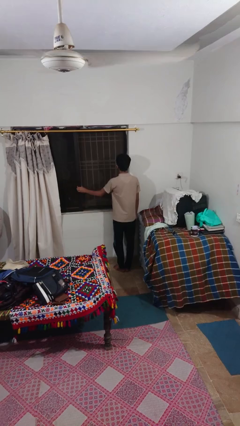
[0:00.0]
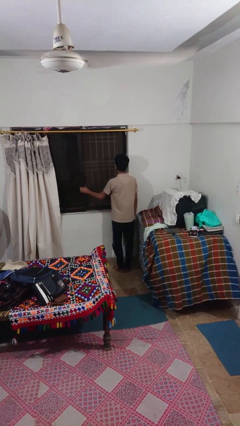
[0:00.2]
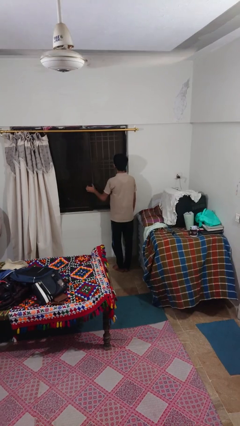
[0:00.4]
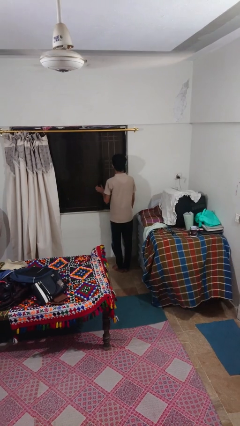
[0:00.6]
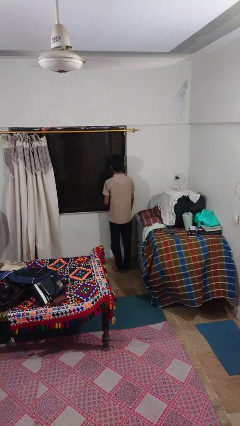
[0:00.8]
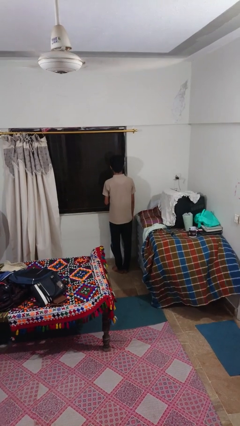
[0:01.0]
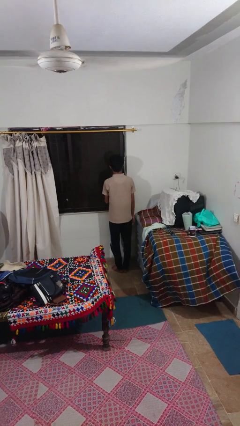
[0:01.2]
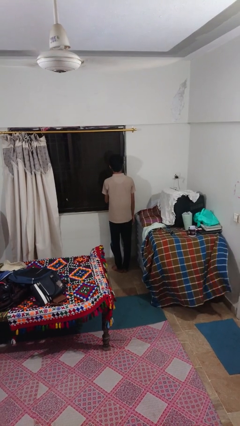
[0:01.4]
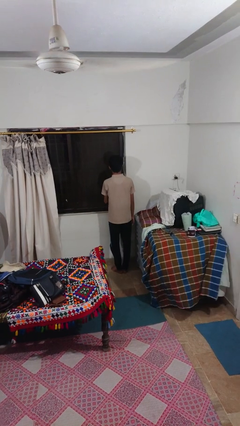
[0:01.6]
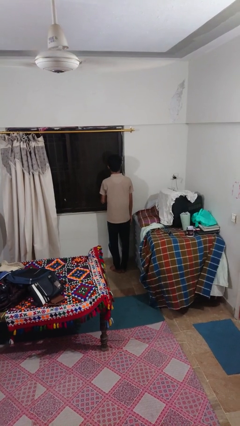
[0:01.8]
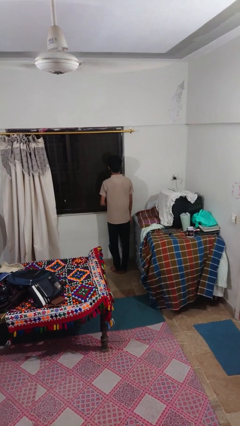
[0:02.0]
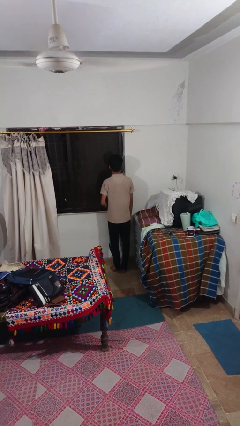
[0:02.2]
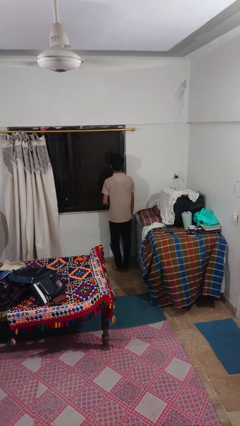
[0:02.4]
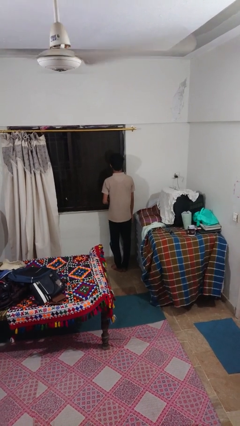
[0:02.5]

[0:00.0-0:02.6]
person closes sliding door

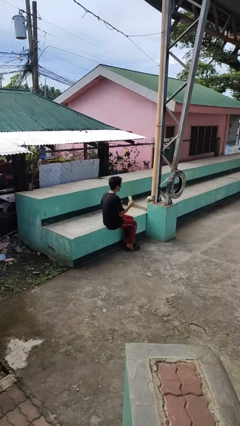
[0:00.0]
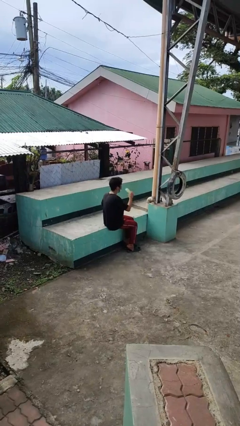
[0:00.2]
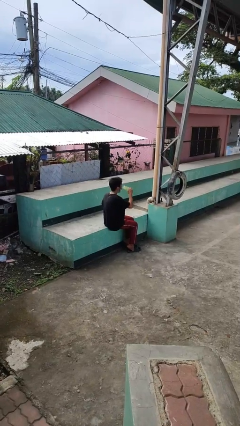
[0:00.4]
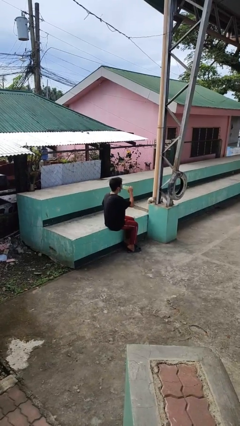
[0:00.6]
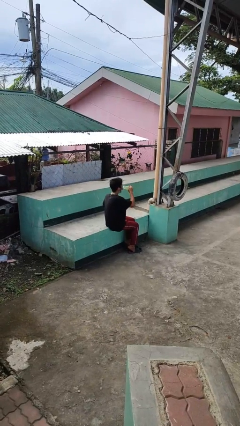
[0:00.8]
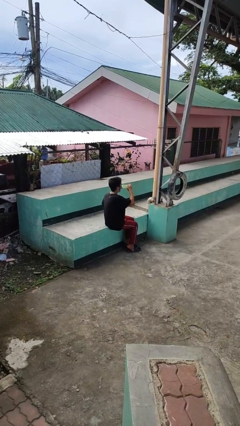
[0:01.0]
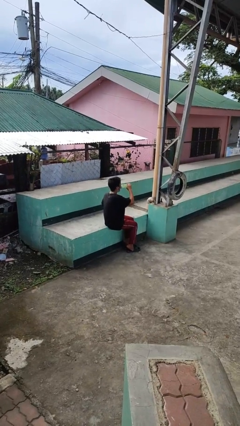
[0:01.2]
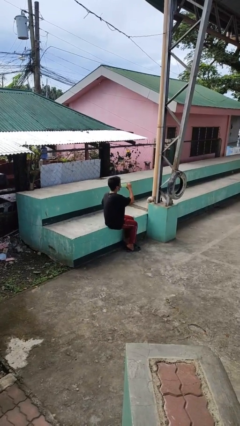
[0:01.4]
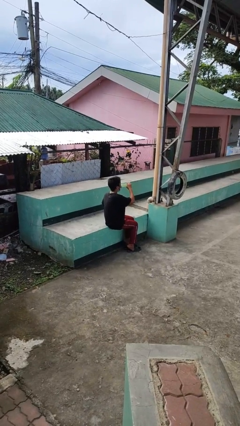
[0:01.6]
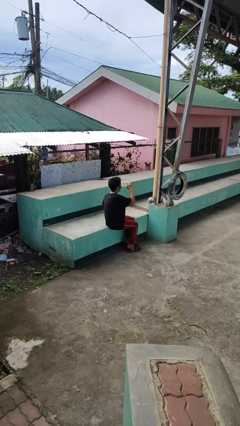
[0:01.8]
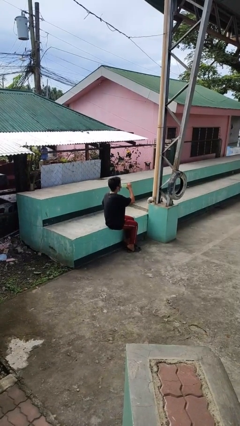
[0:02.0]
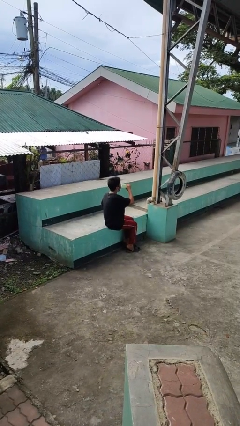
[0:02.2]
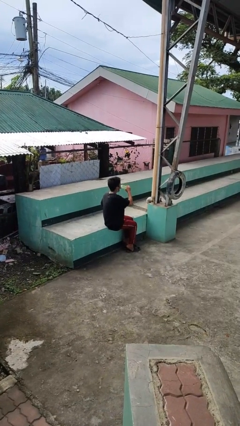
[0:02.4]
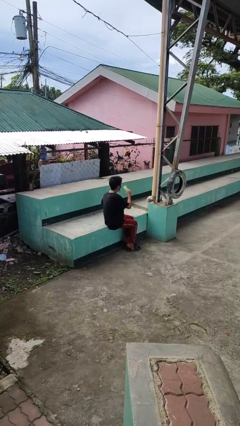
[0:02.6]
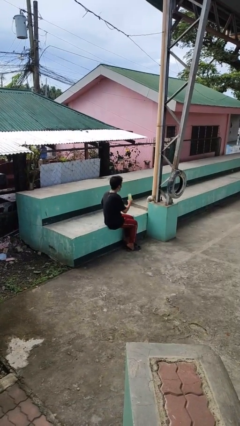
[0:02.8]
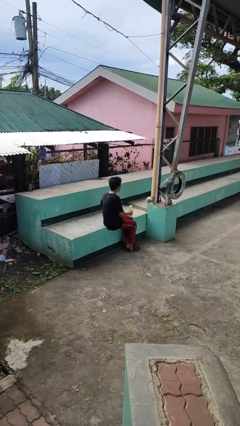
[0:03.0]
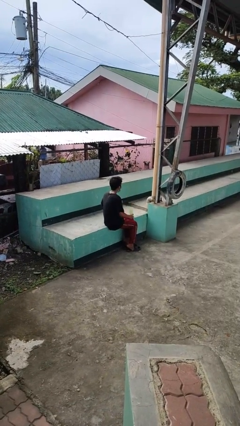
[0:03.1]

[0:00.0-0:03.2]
person drinks from bottle

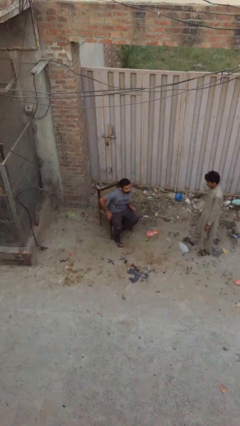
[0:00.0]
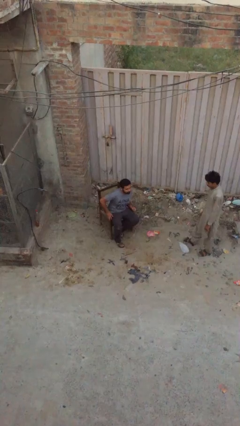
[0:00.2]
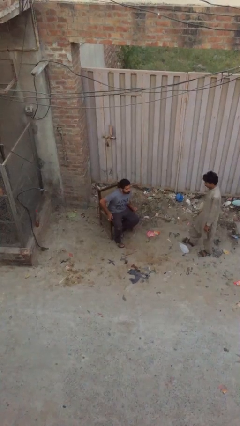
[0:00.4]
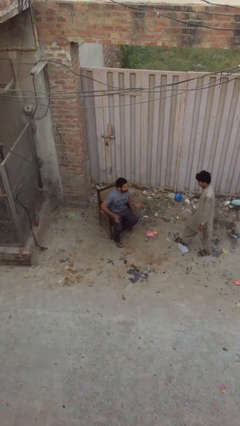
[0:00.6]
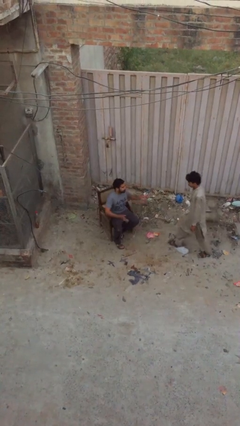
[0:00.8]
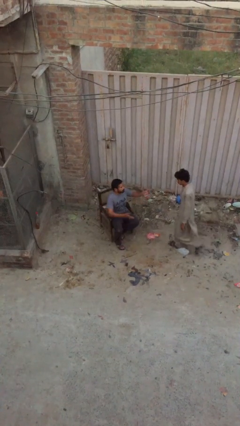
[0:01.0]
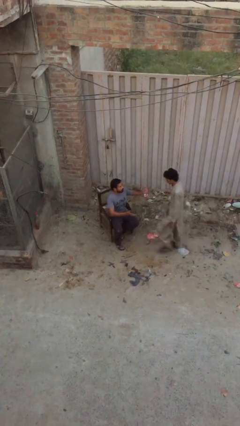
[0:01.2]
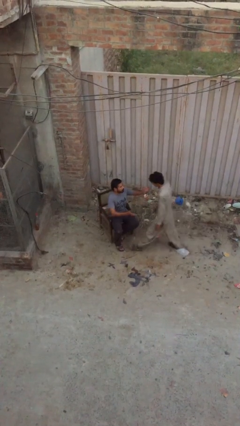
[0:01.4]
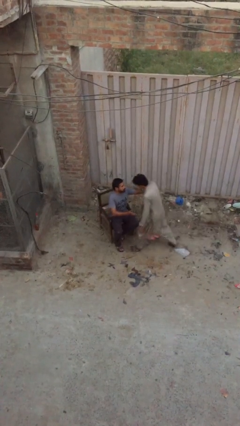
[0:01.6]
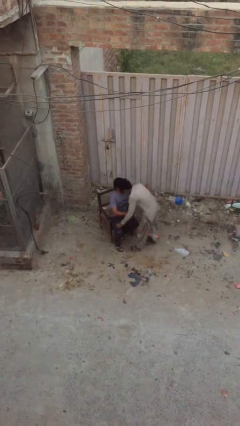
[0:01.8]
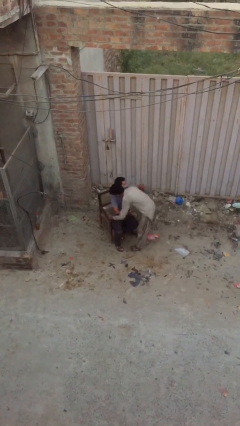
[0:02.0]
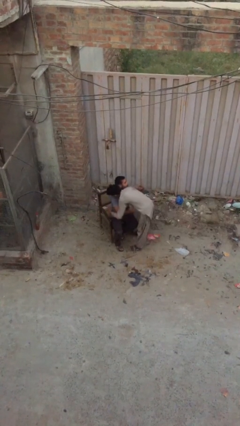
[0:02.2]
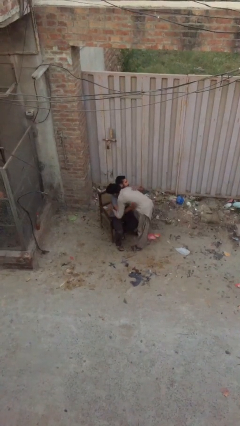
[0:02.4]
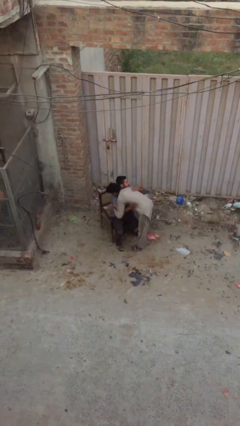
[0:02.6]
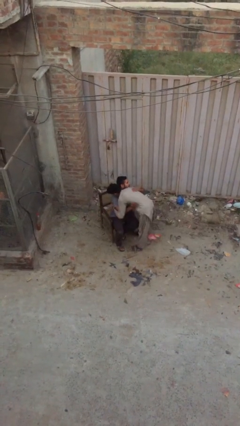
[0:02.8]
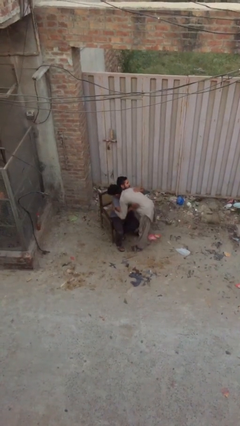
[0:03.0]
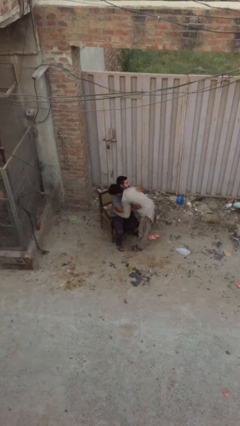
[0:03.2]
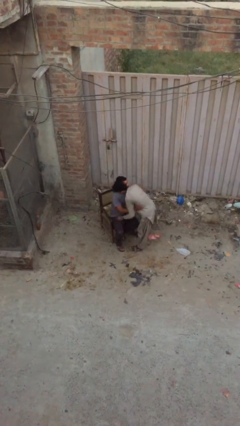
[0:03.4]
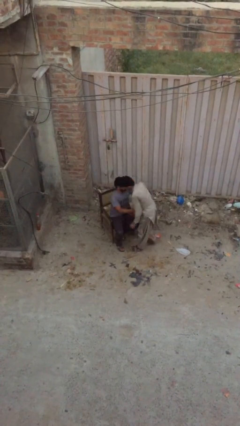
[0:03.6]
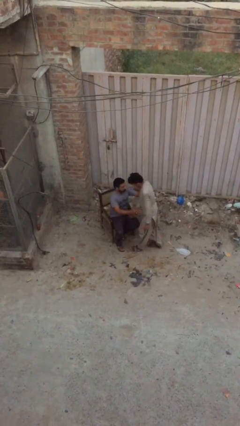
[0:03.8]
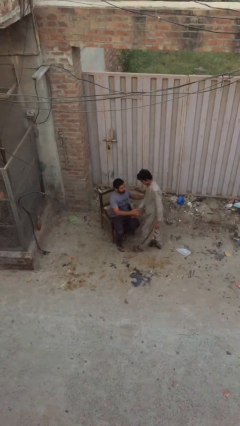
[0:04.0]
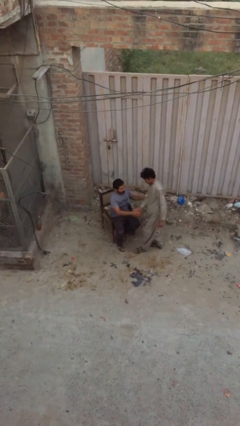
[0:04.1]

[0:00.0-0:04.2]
person embraces person

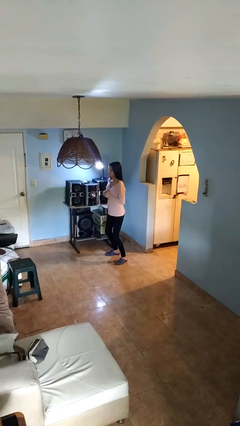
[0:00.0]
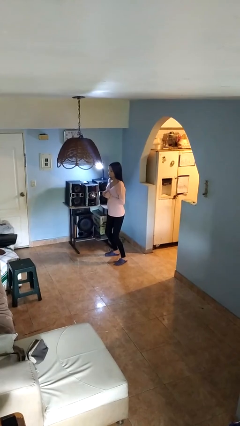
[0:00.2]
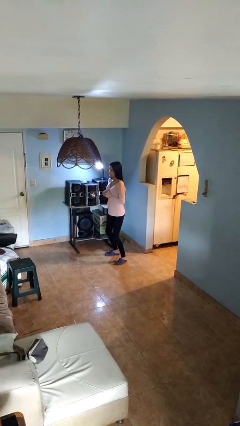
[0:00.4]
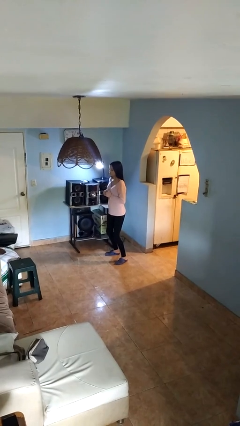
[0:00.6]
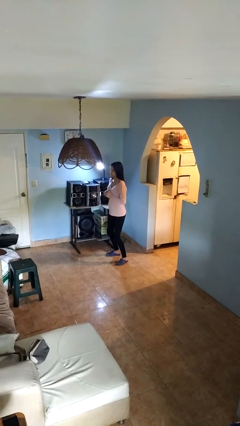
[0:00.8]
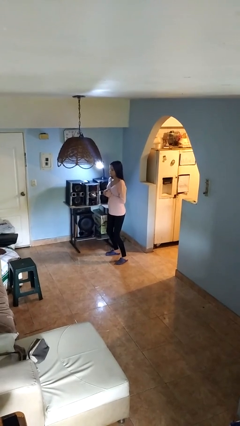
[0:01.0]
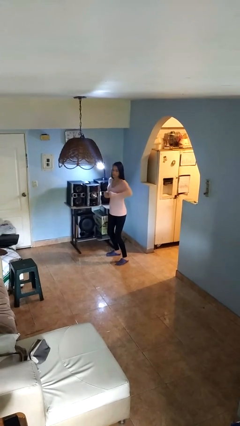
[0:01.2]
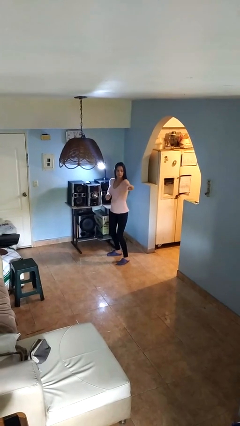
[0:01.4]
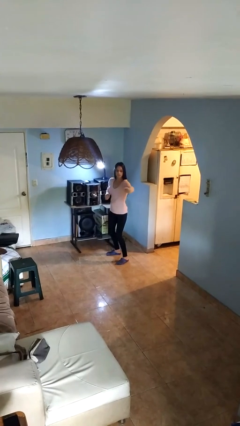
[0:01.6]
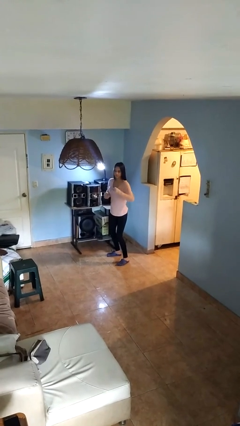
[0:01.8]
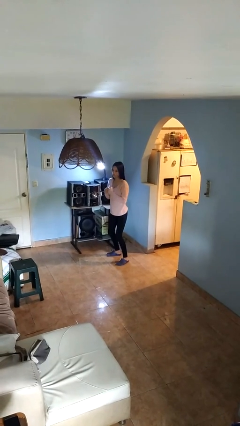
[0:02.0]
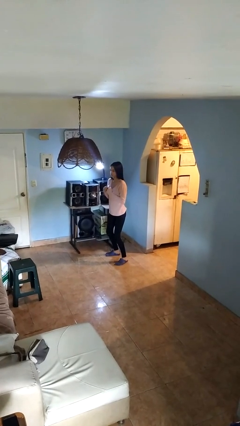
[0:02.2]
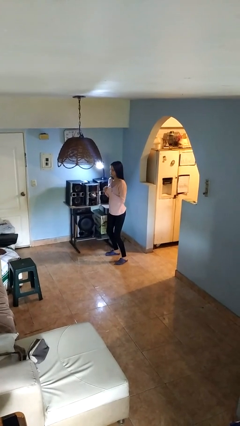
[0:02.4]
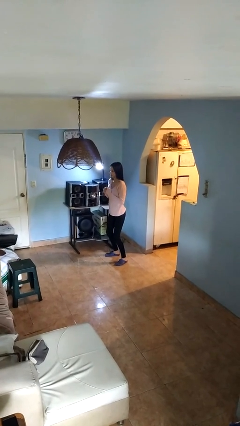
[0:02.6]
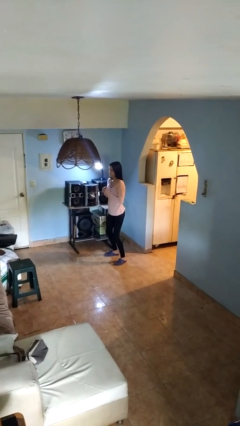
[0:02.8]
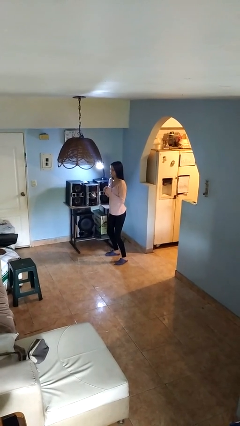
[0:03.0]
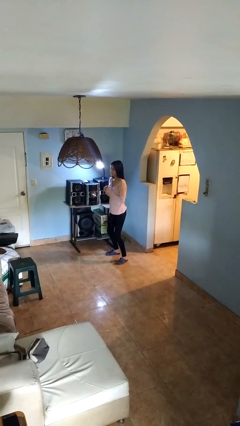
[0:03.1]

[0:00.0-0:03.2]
person karate chop

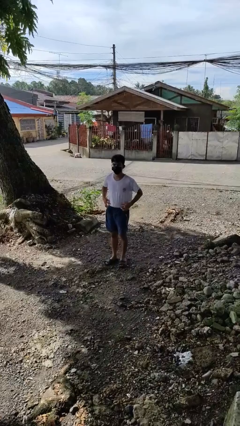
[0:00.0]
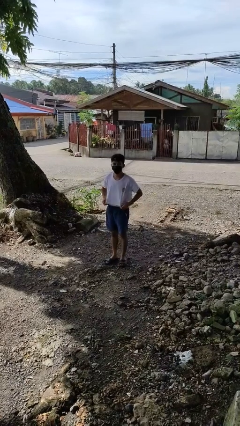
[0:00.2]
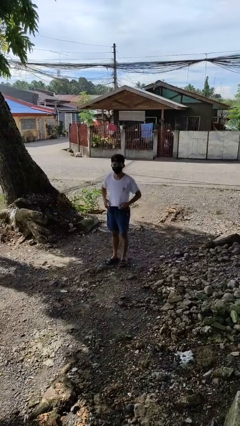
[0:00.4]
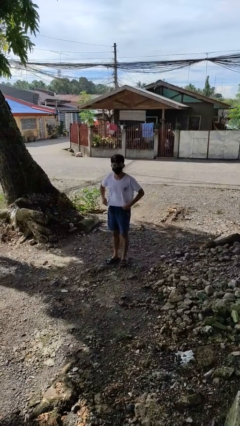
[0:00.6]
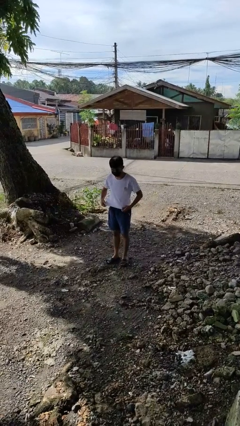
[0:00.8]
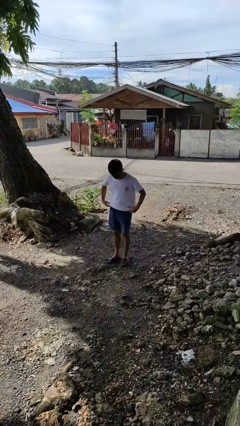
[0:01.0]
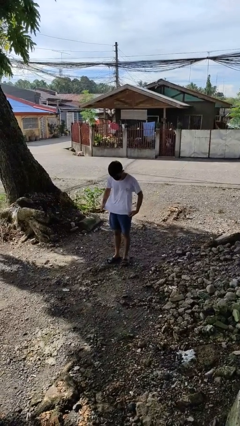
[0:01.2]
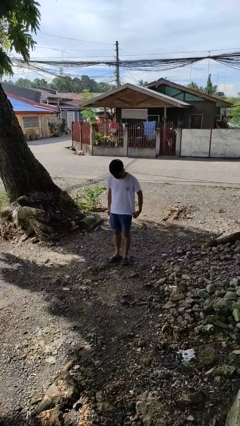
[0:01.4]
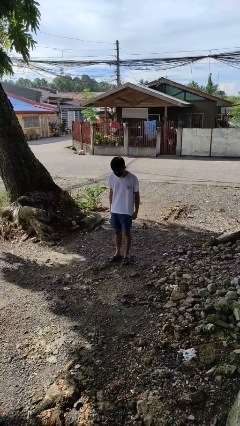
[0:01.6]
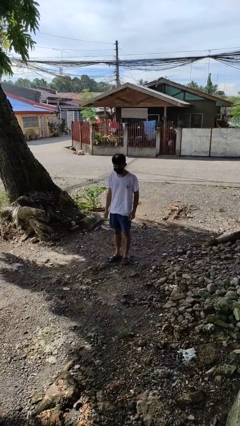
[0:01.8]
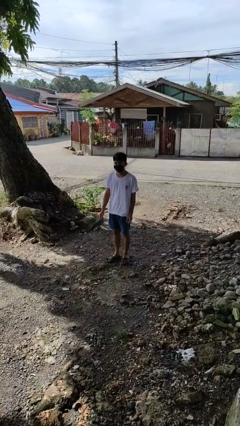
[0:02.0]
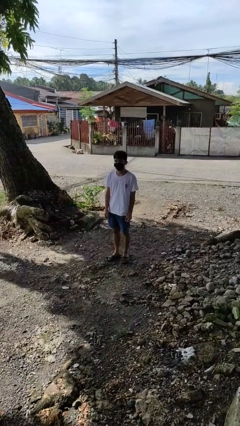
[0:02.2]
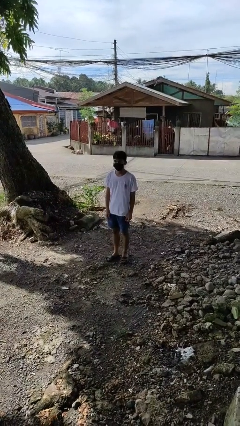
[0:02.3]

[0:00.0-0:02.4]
person untucks shirt

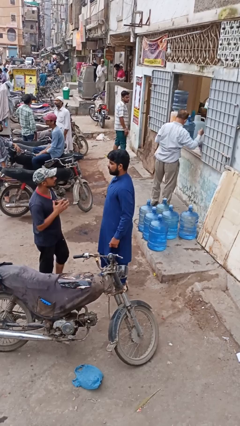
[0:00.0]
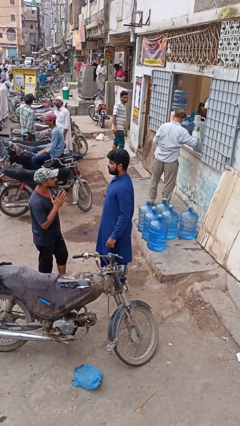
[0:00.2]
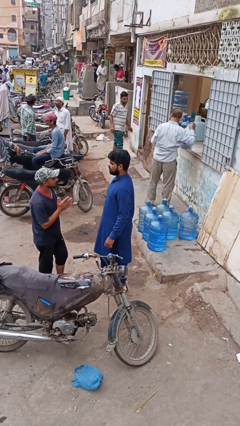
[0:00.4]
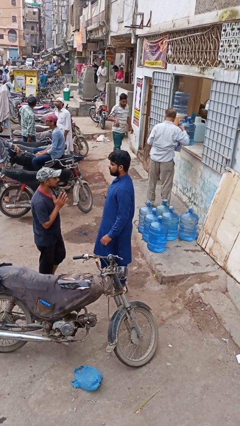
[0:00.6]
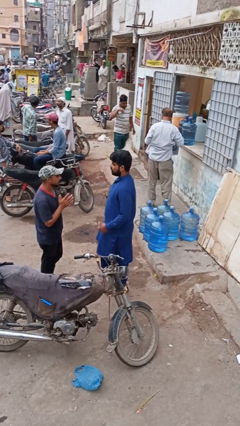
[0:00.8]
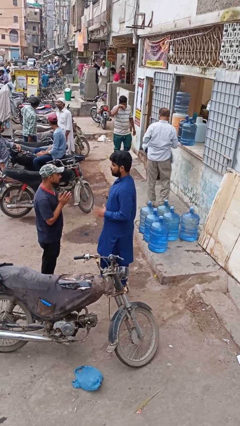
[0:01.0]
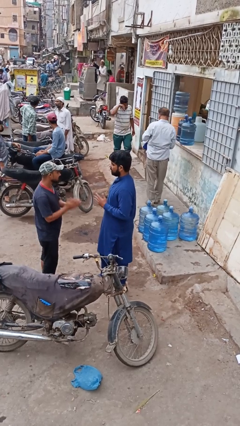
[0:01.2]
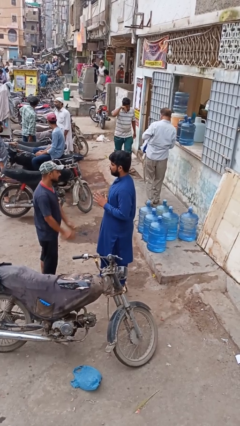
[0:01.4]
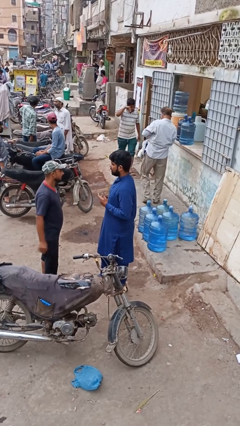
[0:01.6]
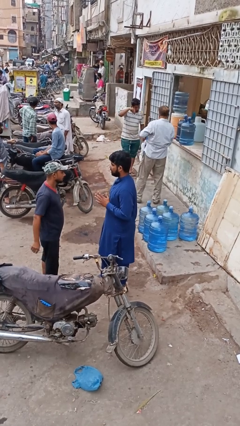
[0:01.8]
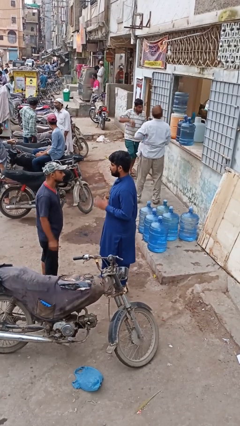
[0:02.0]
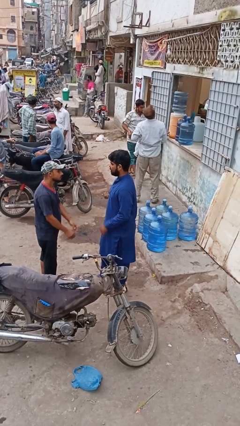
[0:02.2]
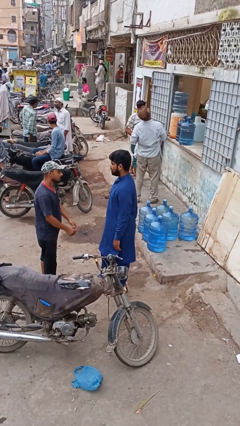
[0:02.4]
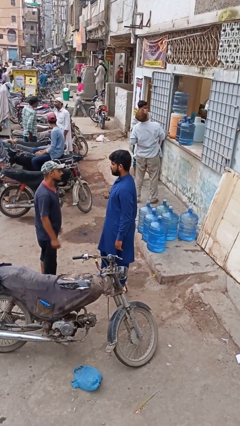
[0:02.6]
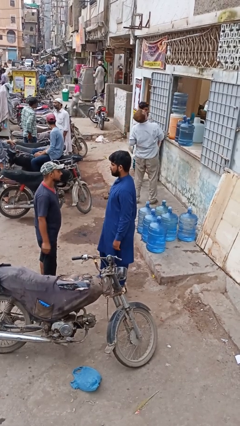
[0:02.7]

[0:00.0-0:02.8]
person talks to person
